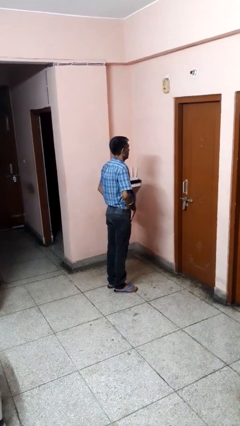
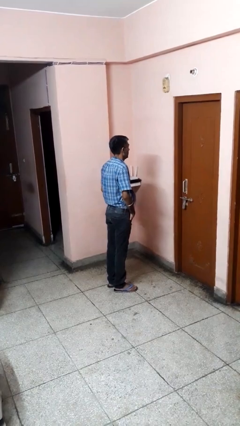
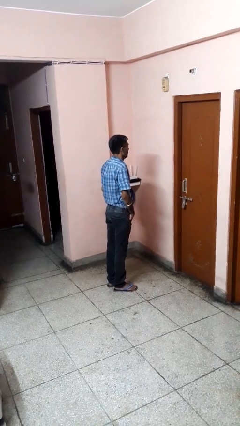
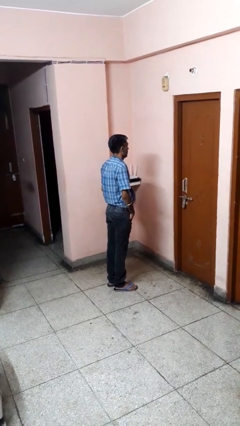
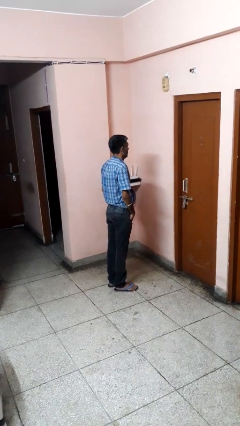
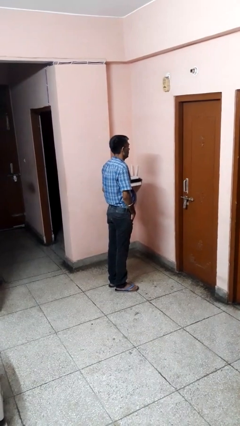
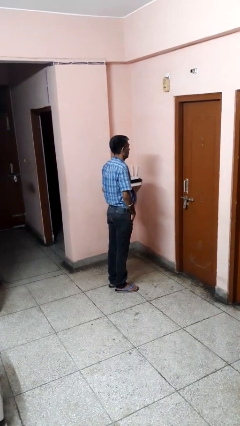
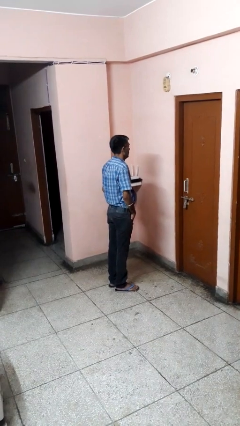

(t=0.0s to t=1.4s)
person puts hands in back pockets

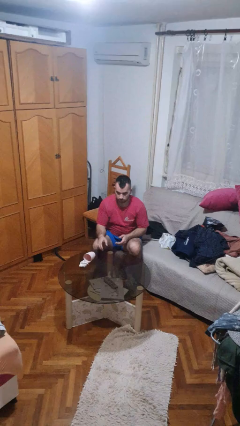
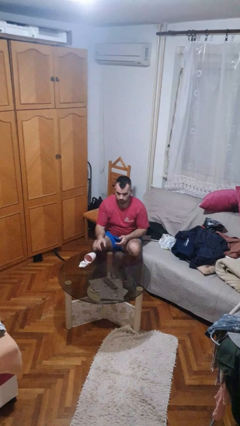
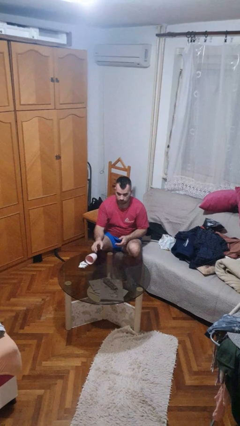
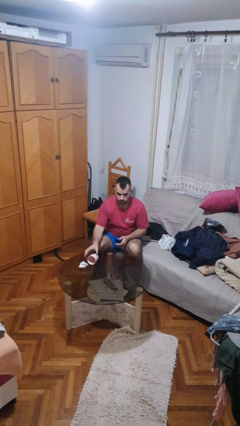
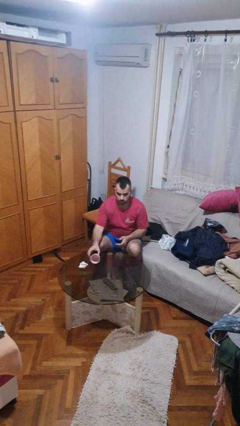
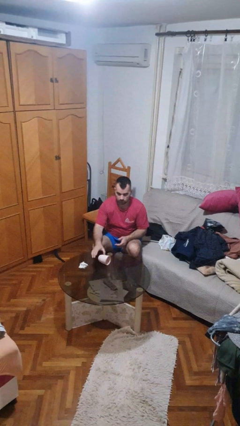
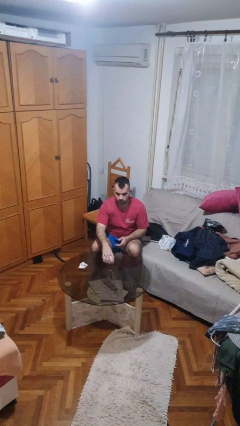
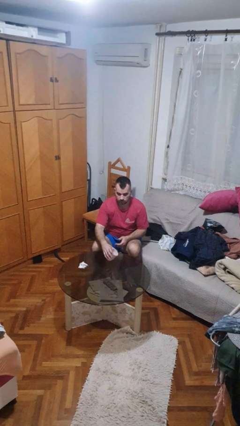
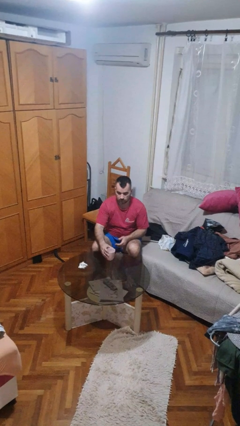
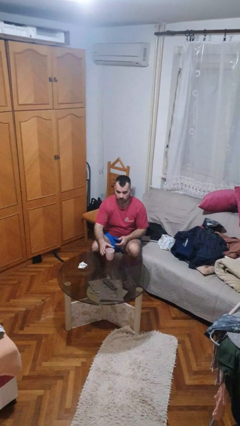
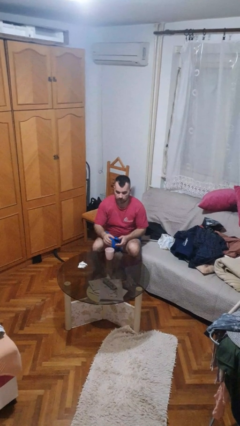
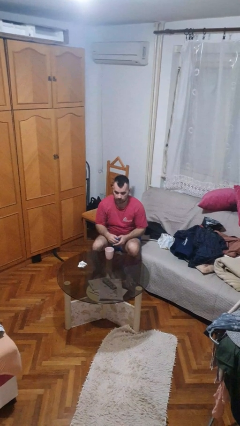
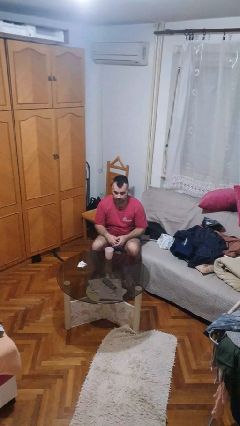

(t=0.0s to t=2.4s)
person sets upright glass

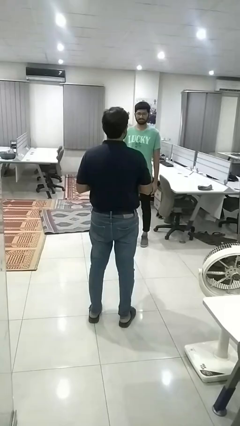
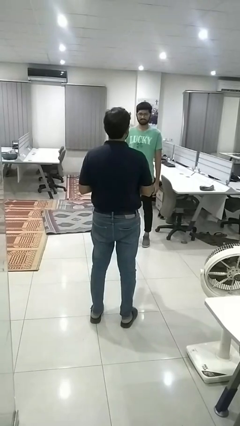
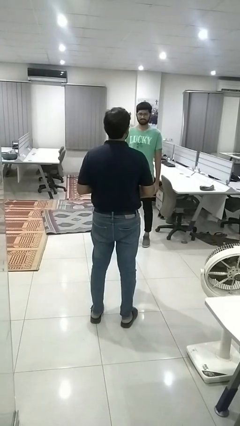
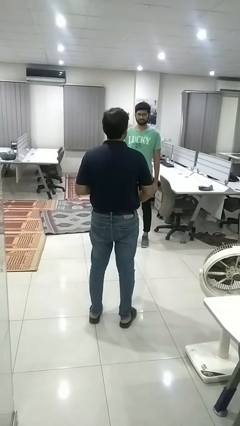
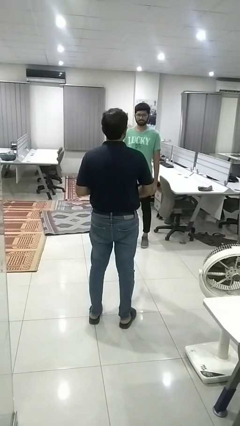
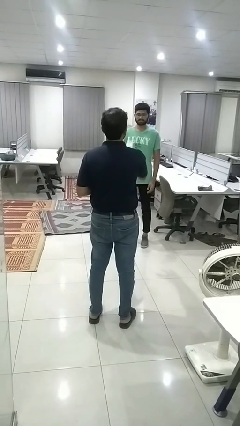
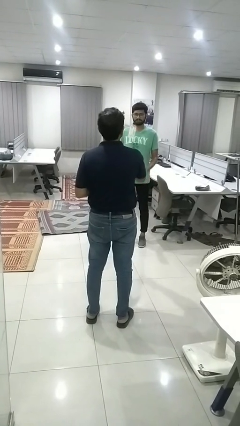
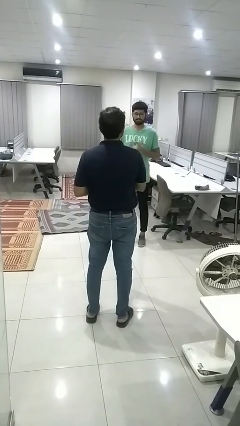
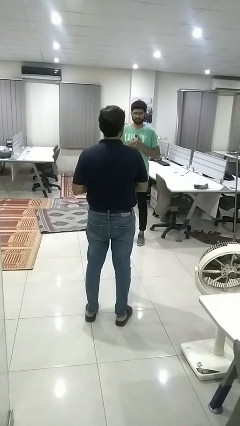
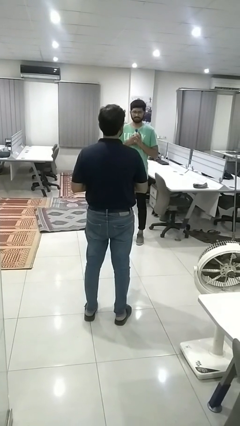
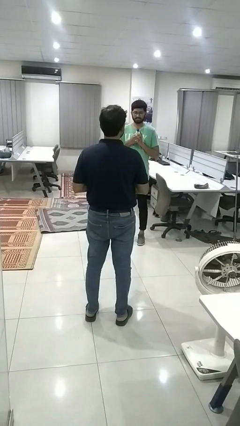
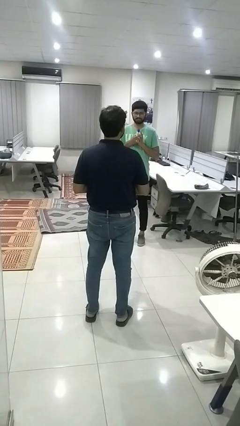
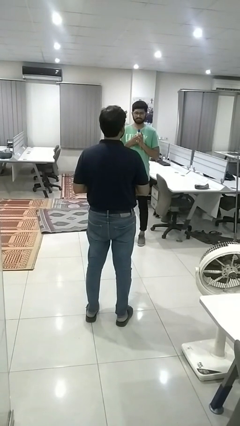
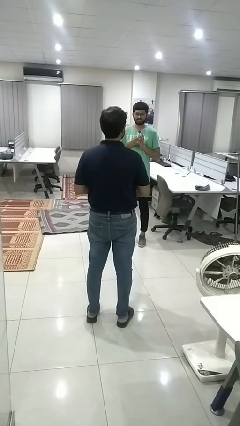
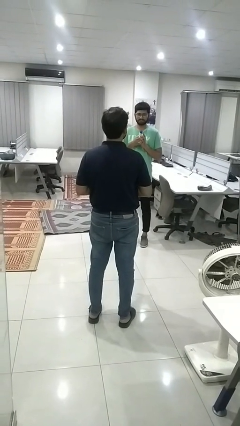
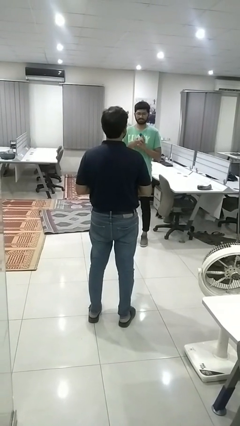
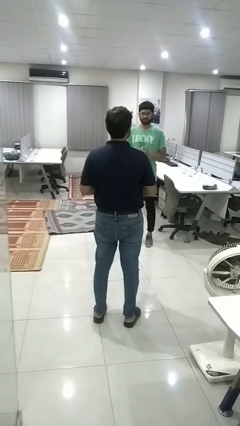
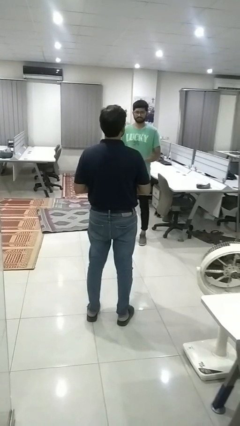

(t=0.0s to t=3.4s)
person throws object to person

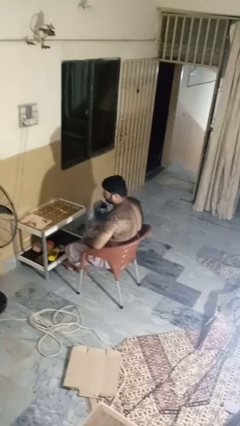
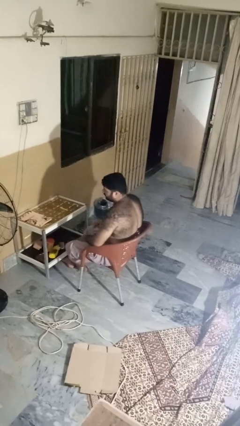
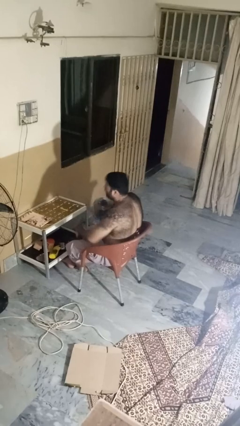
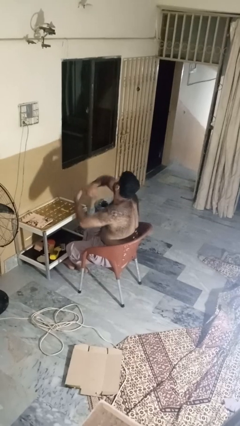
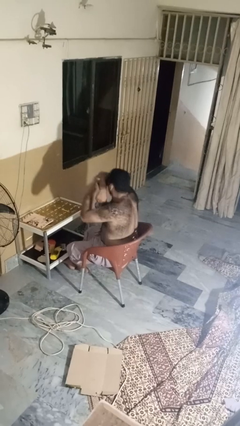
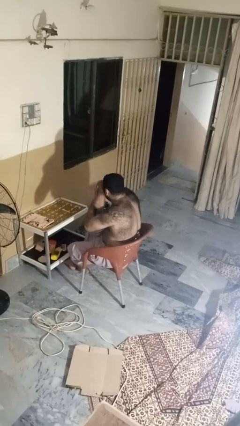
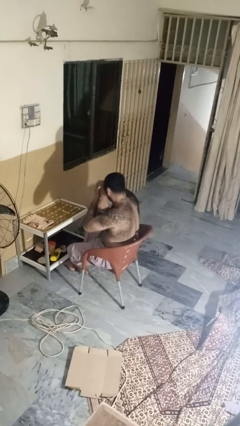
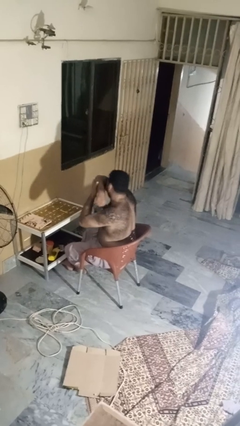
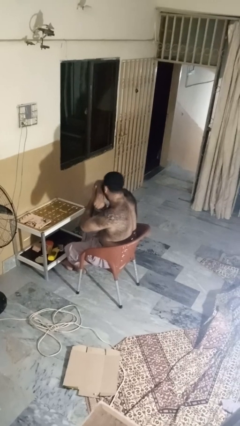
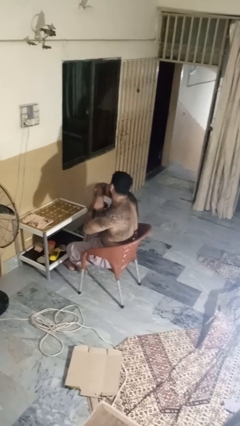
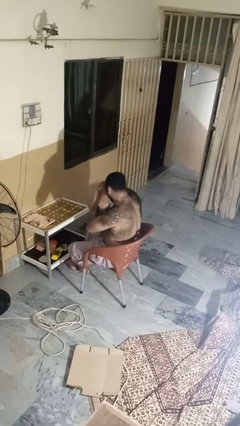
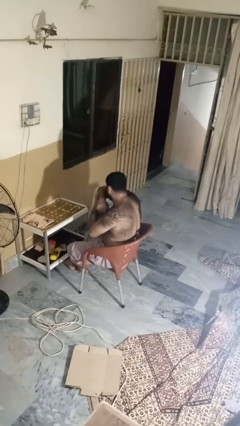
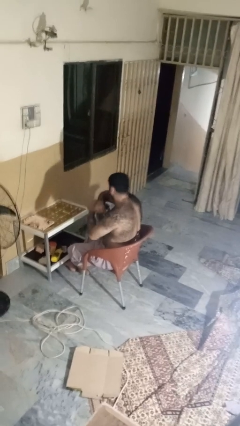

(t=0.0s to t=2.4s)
person sneezes into arm

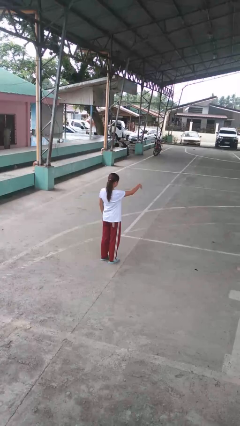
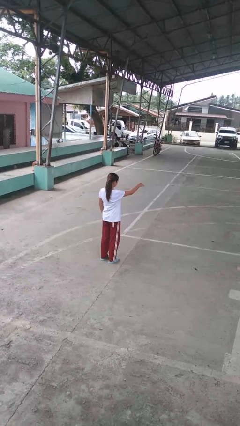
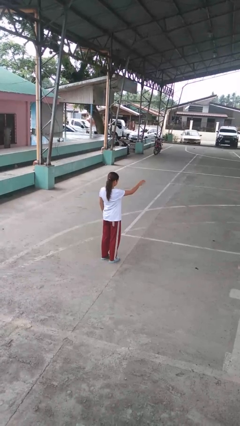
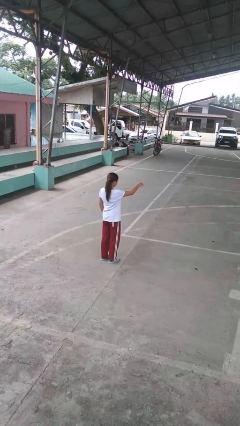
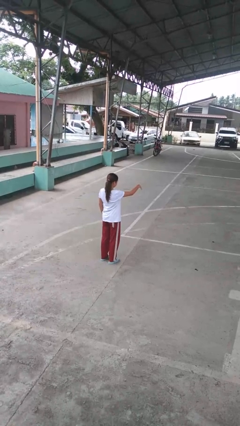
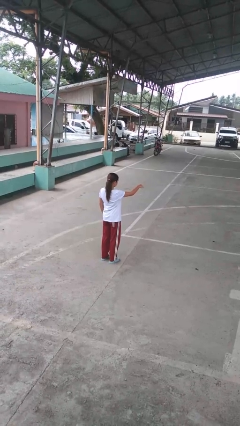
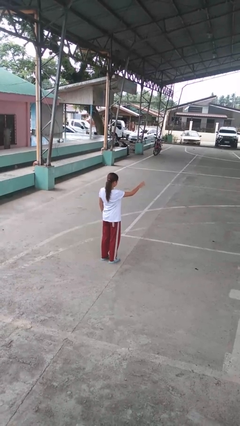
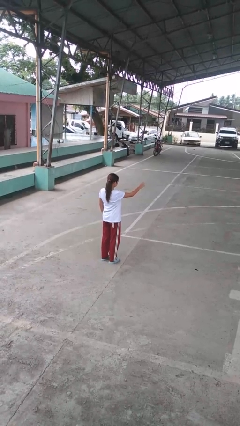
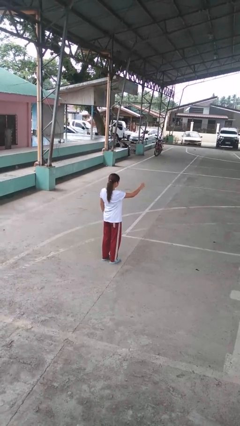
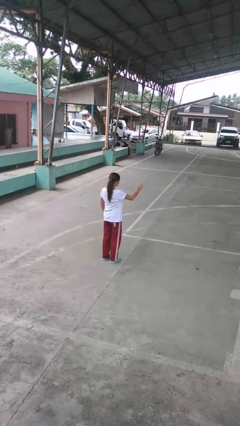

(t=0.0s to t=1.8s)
person gestures come here

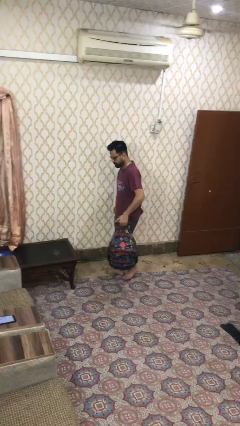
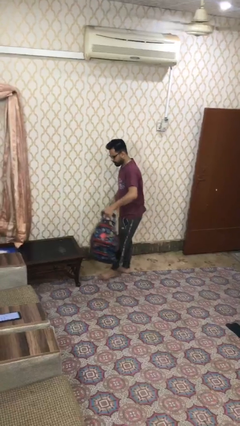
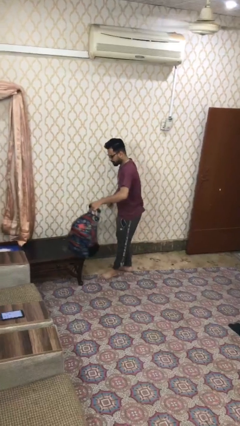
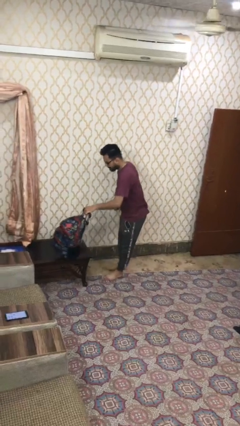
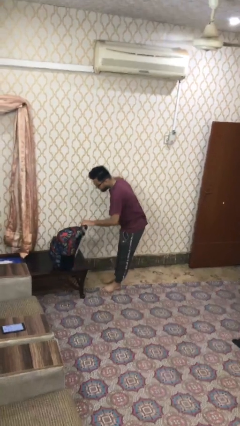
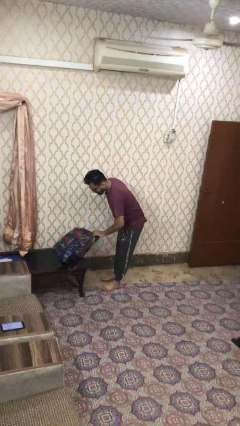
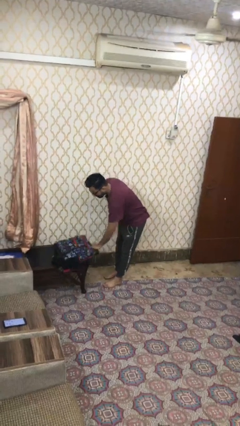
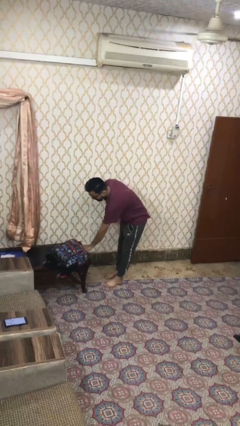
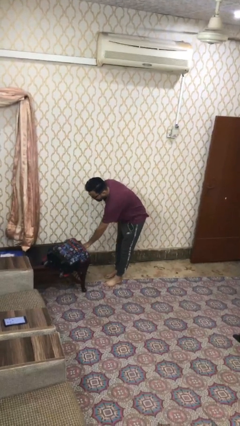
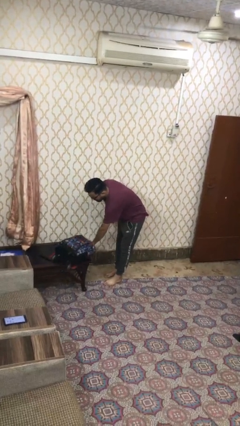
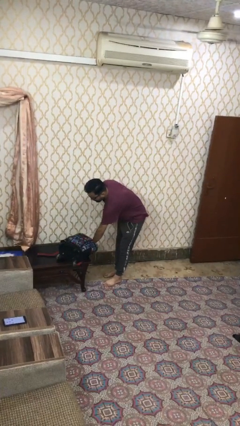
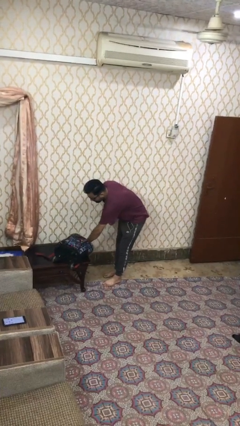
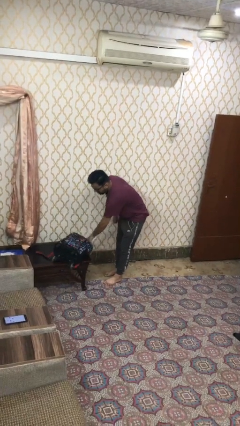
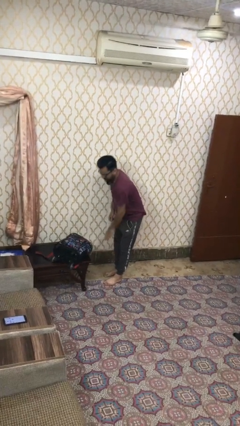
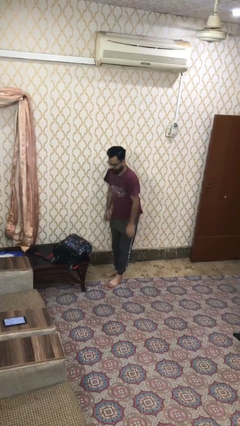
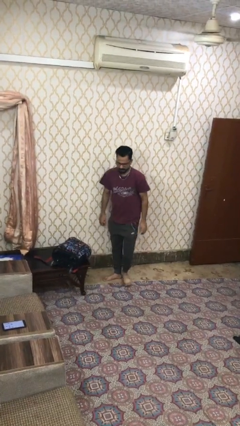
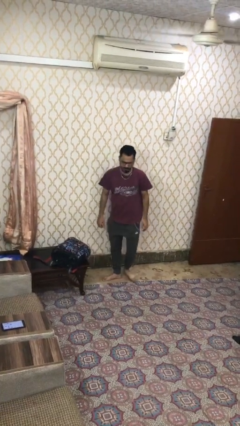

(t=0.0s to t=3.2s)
person puts down object on table

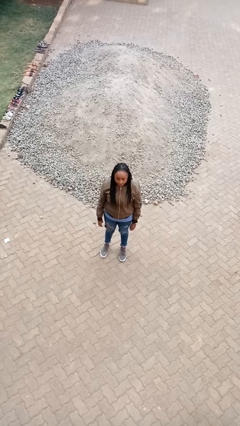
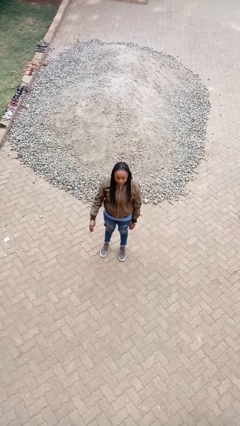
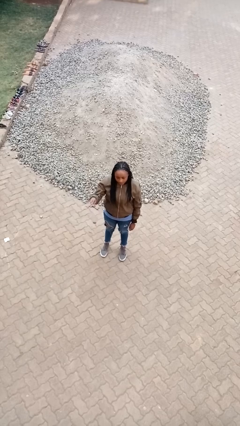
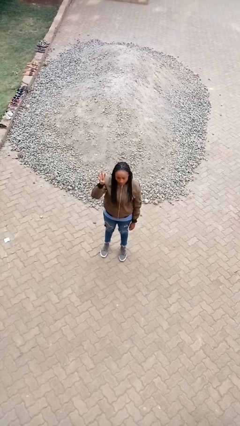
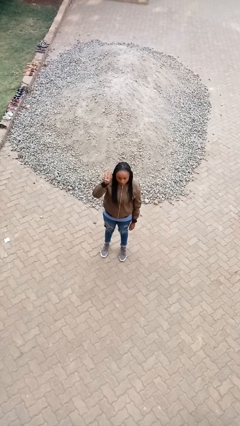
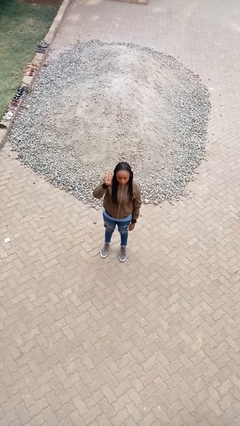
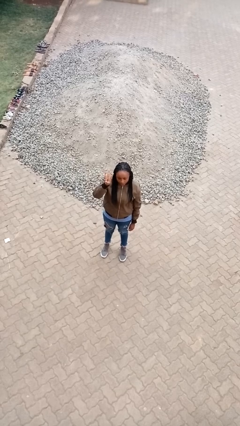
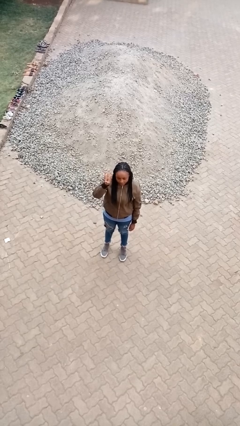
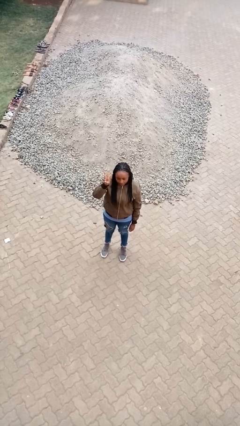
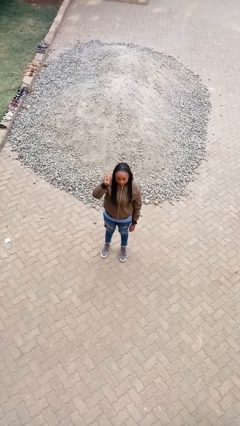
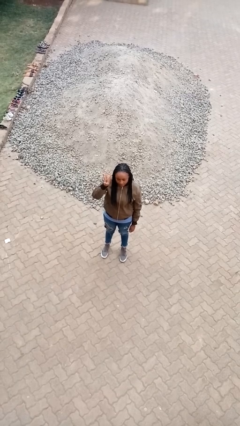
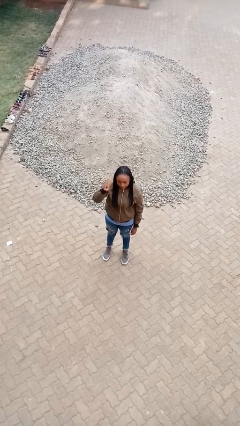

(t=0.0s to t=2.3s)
person gestures number three

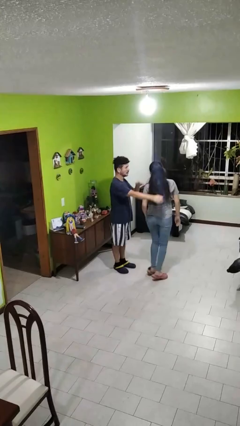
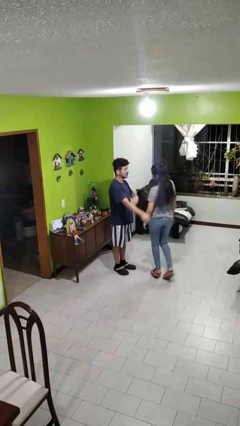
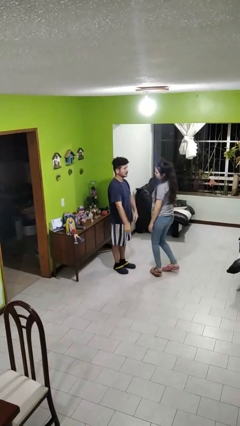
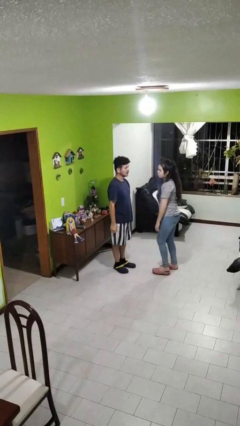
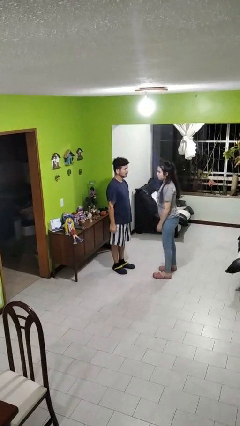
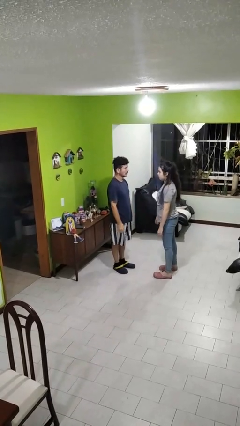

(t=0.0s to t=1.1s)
person spins person around
